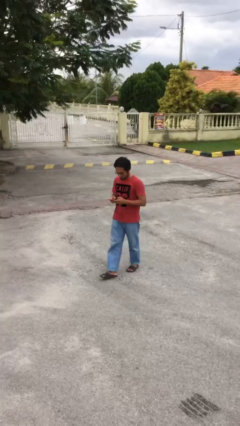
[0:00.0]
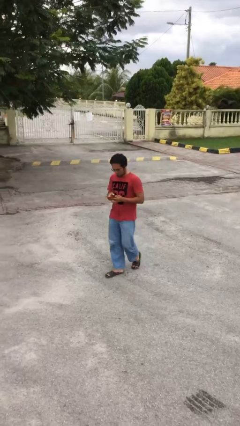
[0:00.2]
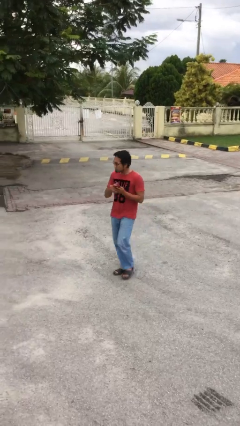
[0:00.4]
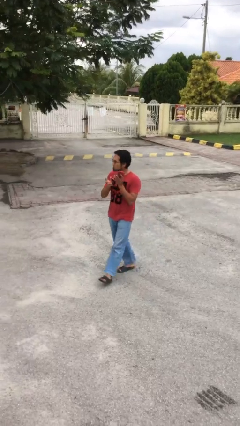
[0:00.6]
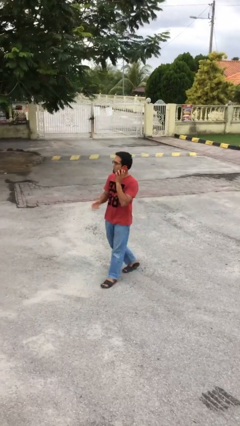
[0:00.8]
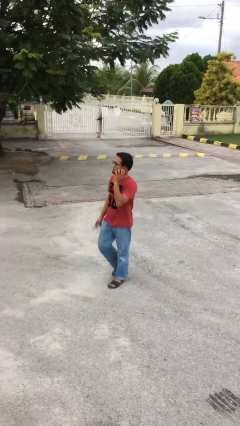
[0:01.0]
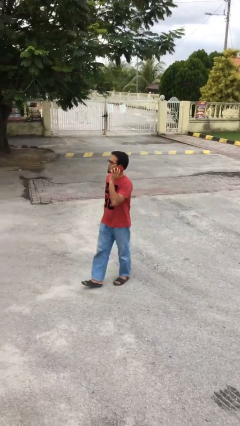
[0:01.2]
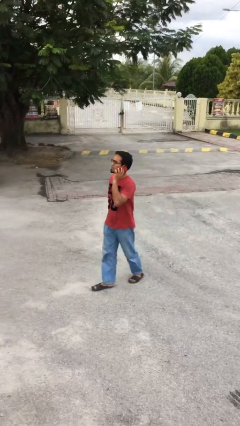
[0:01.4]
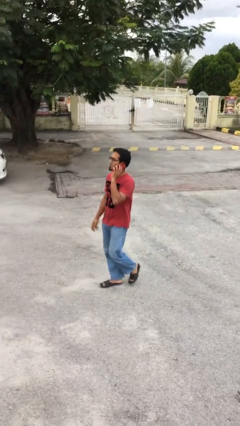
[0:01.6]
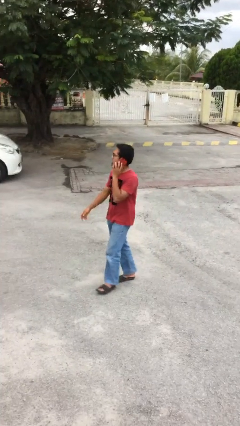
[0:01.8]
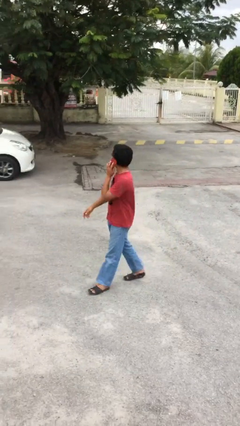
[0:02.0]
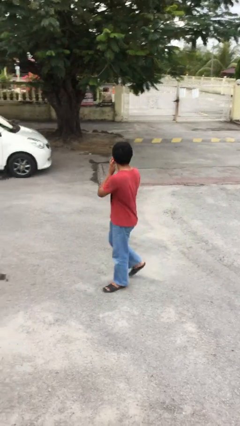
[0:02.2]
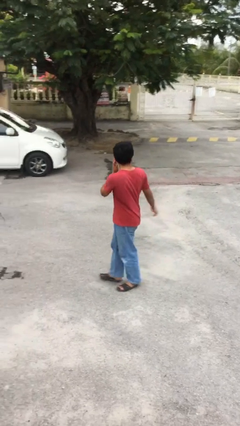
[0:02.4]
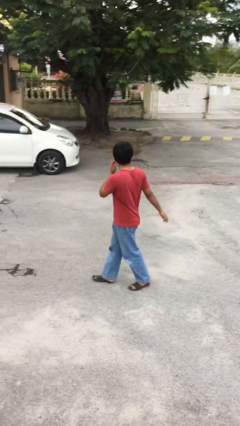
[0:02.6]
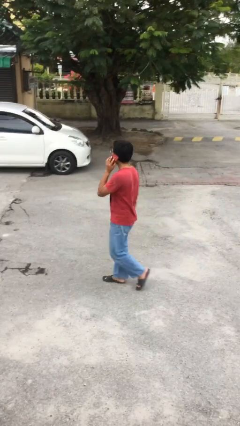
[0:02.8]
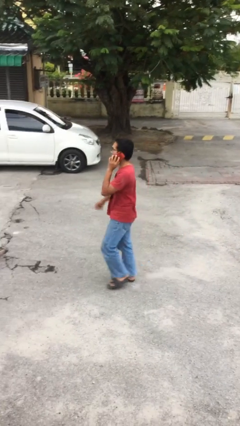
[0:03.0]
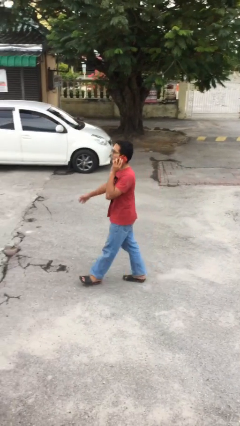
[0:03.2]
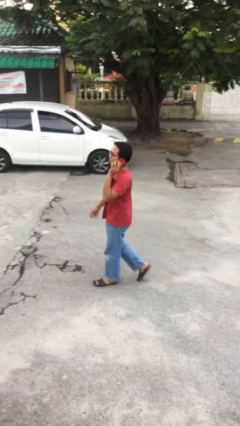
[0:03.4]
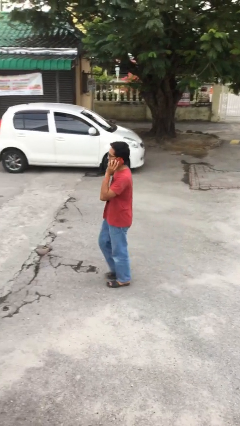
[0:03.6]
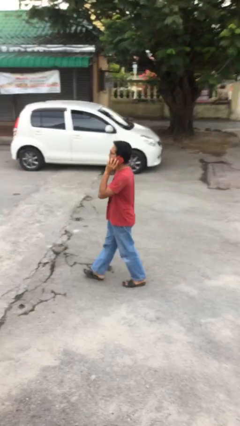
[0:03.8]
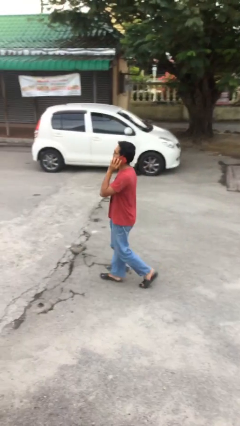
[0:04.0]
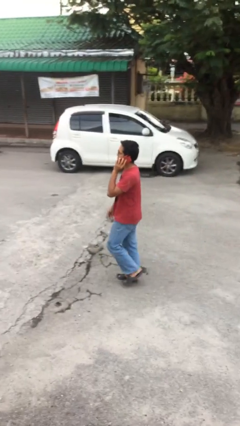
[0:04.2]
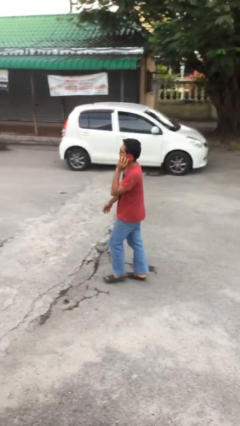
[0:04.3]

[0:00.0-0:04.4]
person talks on phone

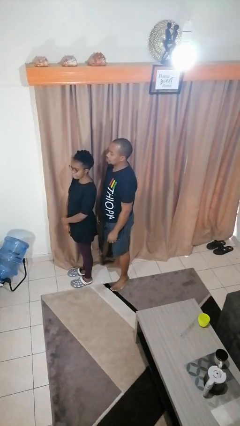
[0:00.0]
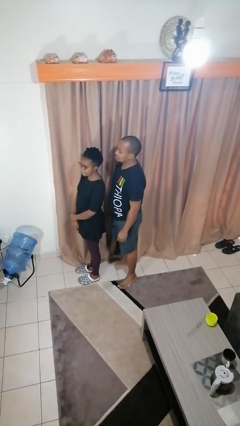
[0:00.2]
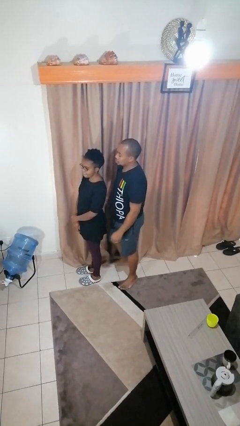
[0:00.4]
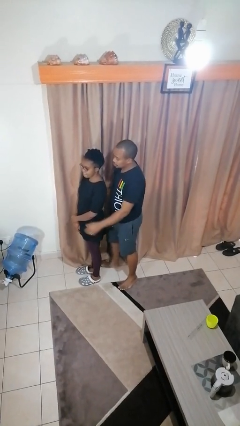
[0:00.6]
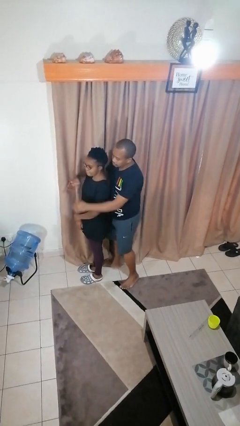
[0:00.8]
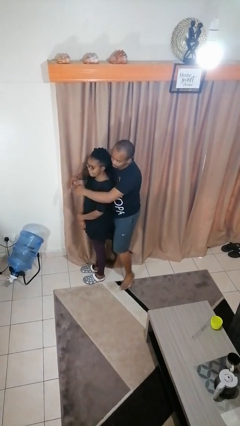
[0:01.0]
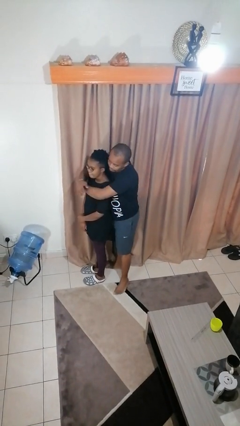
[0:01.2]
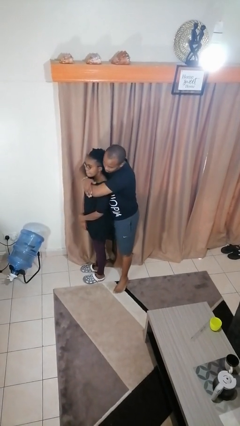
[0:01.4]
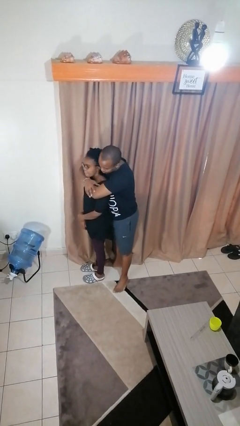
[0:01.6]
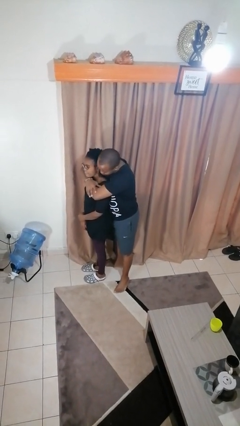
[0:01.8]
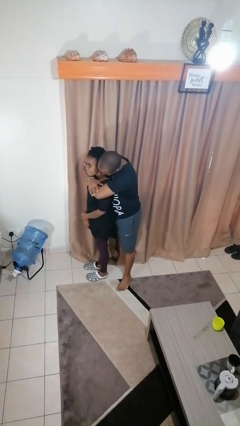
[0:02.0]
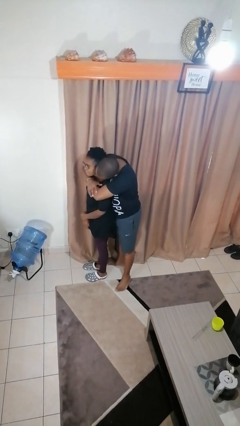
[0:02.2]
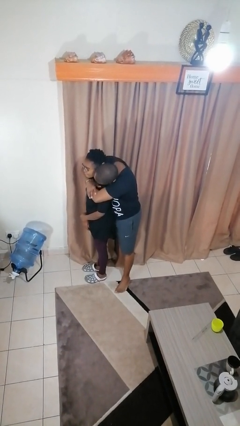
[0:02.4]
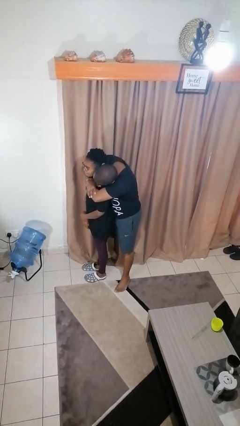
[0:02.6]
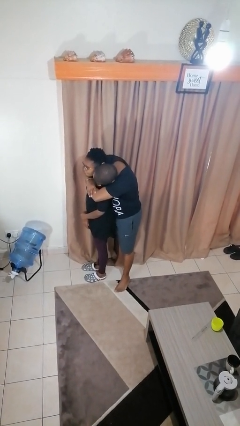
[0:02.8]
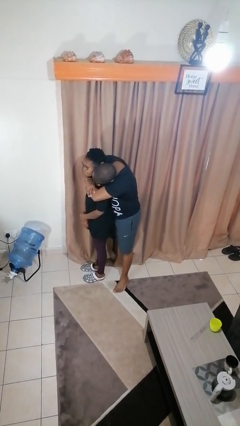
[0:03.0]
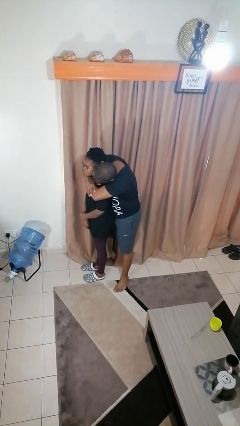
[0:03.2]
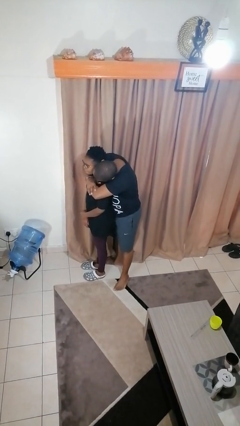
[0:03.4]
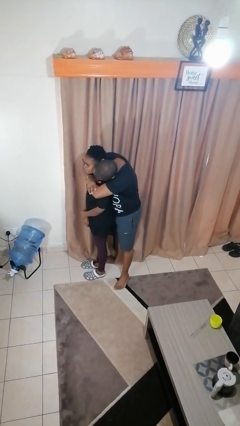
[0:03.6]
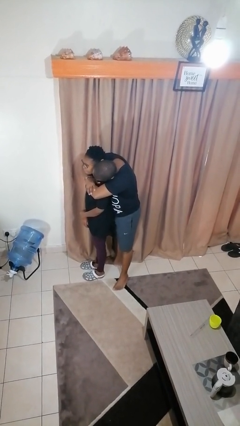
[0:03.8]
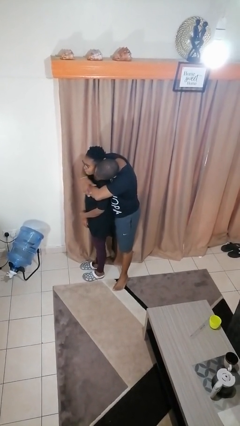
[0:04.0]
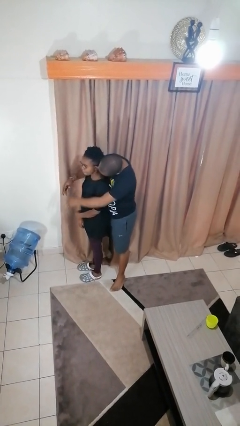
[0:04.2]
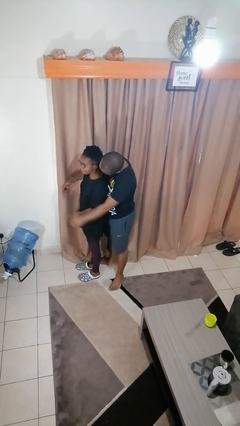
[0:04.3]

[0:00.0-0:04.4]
person hugs person from behind

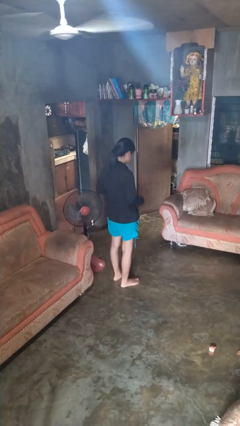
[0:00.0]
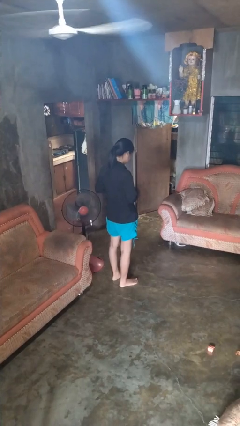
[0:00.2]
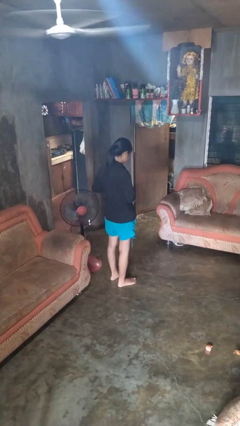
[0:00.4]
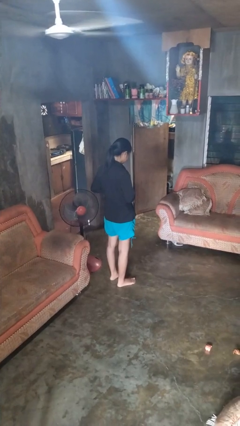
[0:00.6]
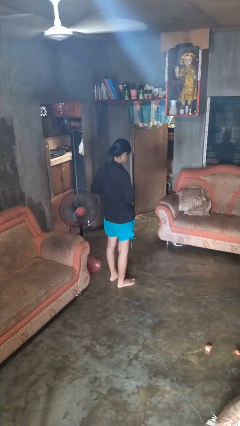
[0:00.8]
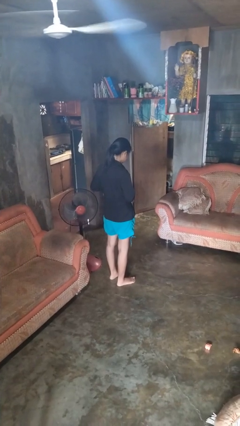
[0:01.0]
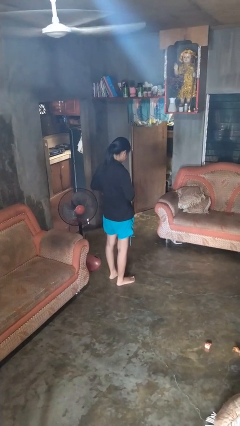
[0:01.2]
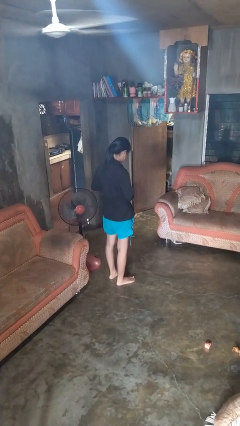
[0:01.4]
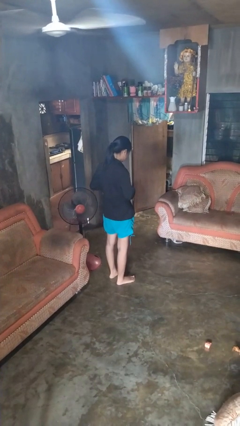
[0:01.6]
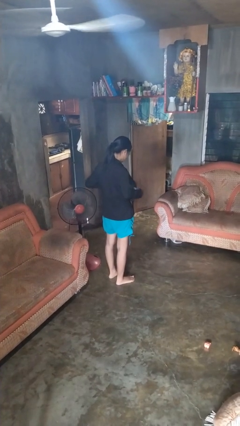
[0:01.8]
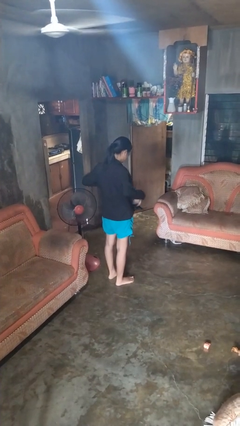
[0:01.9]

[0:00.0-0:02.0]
person unbuttons shirt

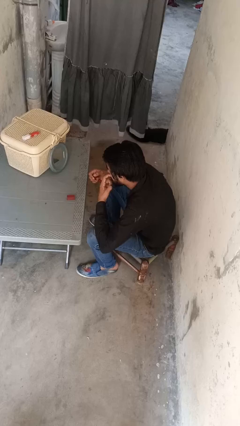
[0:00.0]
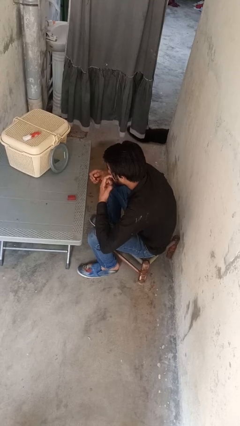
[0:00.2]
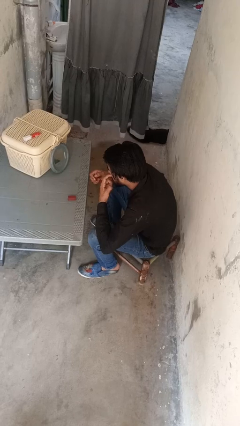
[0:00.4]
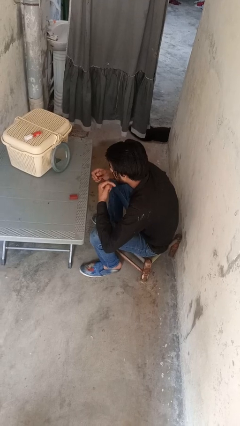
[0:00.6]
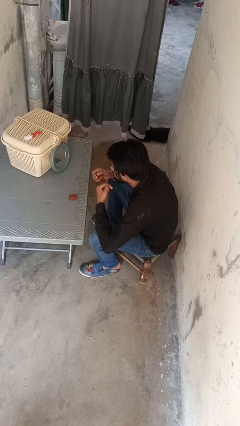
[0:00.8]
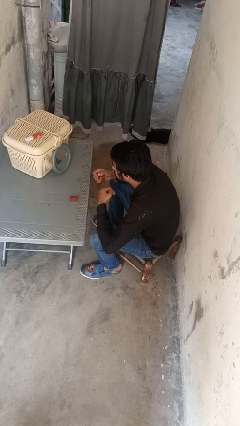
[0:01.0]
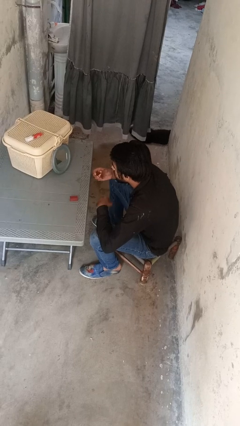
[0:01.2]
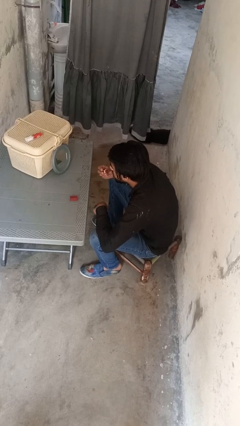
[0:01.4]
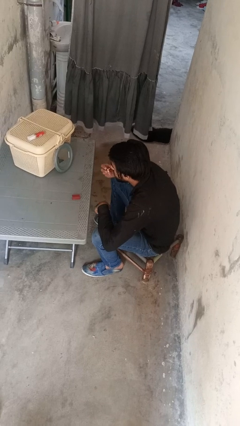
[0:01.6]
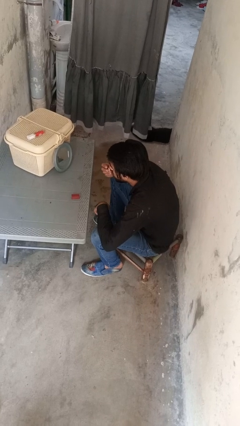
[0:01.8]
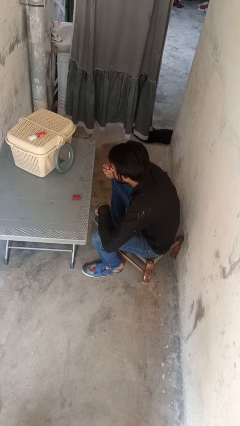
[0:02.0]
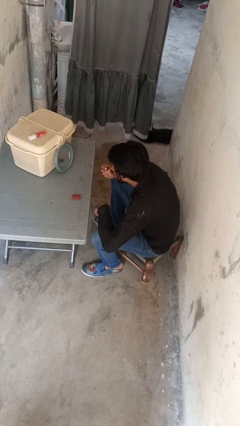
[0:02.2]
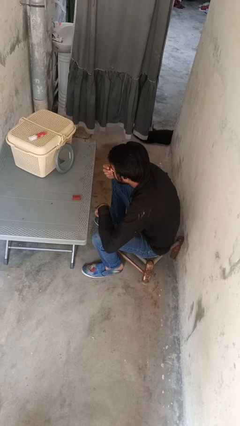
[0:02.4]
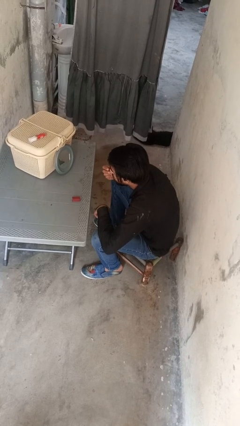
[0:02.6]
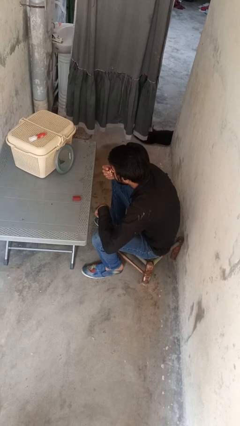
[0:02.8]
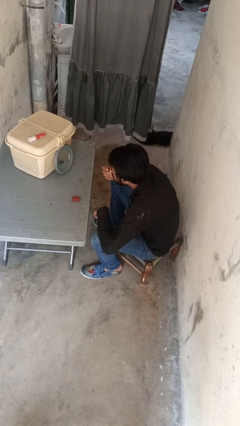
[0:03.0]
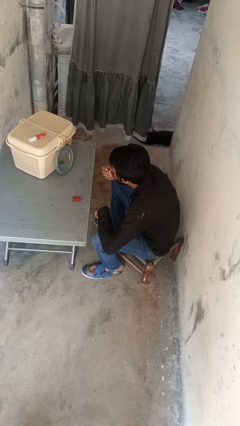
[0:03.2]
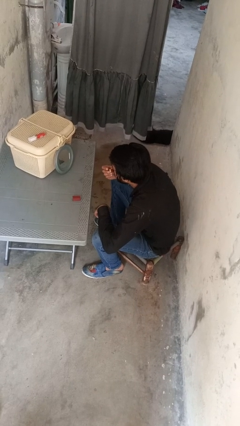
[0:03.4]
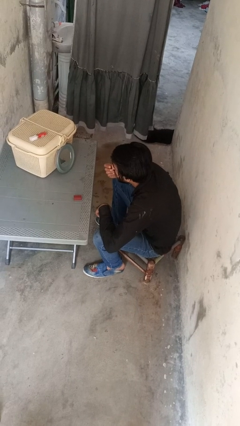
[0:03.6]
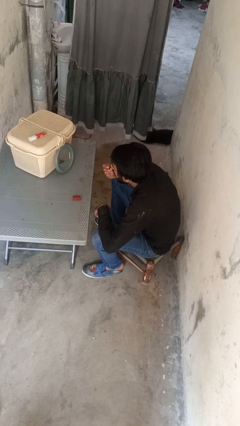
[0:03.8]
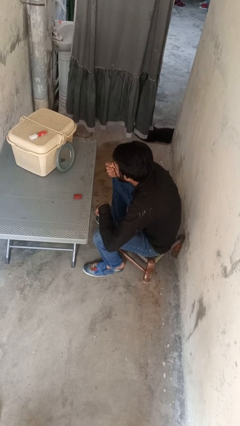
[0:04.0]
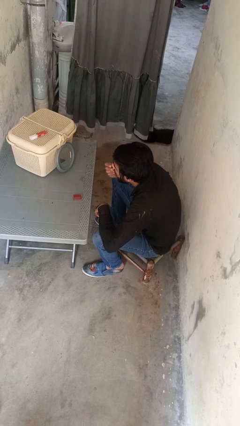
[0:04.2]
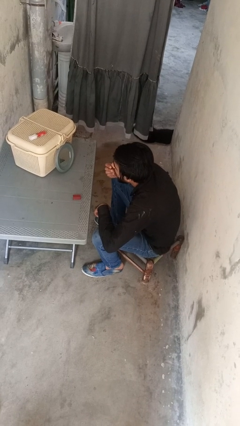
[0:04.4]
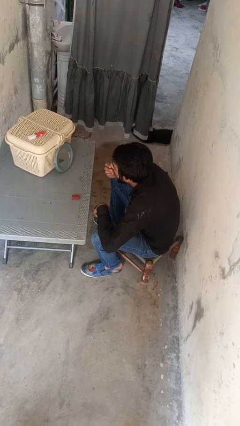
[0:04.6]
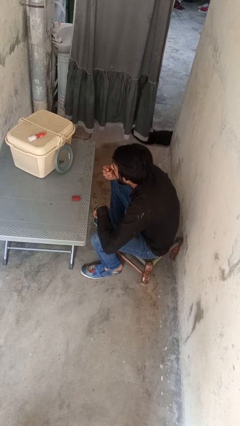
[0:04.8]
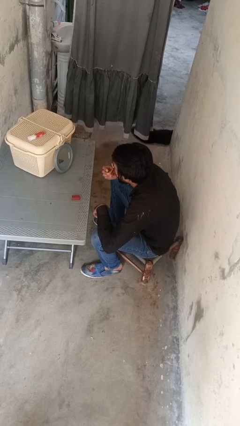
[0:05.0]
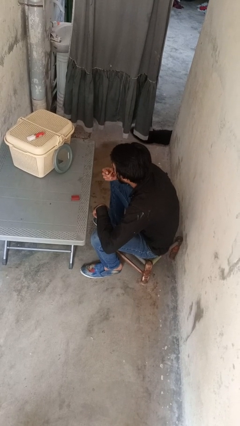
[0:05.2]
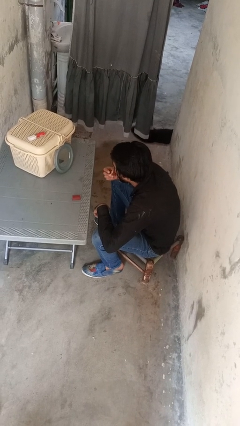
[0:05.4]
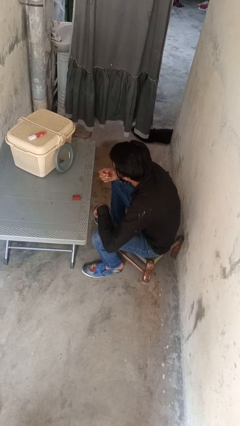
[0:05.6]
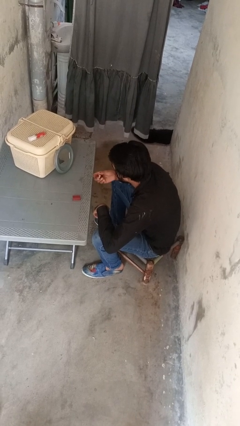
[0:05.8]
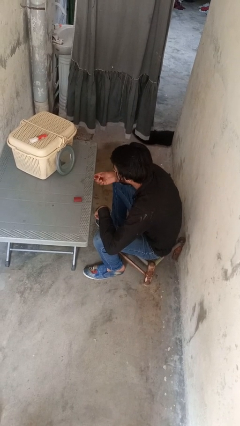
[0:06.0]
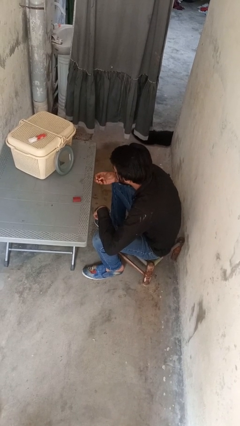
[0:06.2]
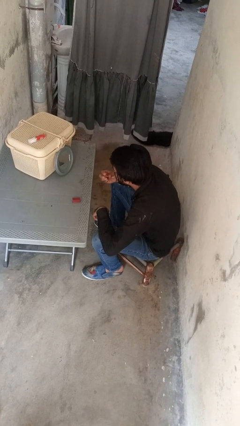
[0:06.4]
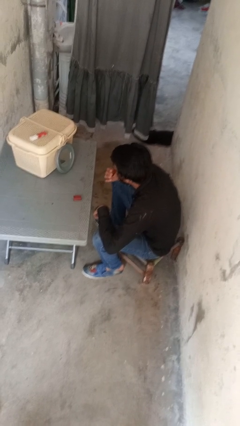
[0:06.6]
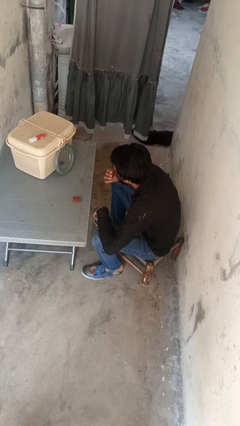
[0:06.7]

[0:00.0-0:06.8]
person applies lip makeup
